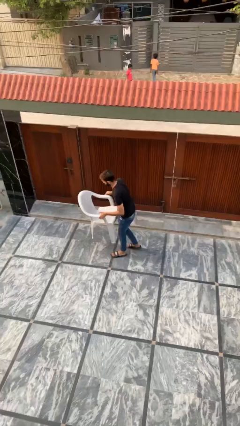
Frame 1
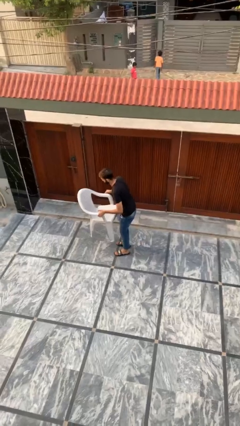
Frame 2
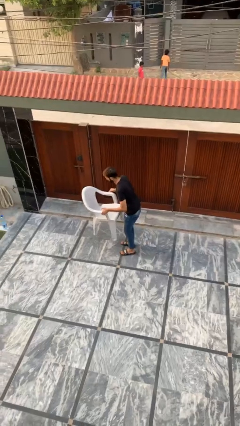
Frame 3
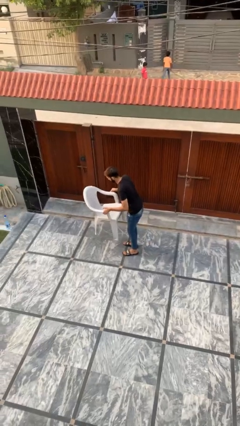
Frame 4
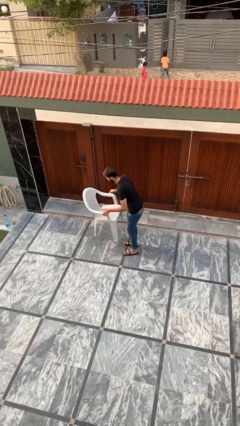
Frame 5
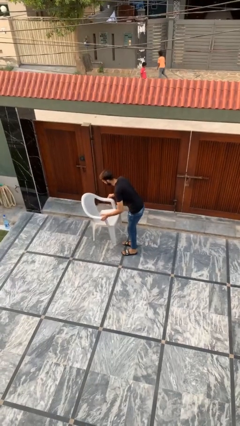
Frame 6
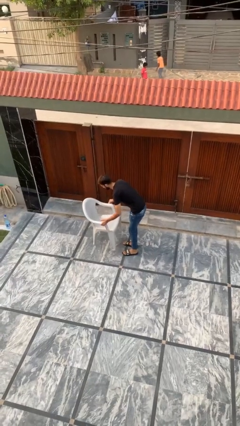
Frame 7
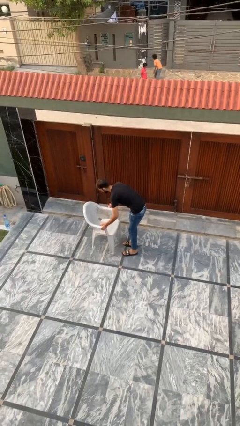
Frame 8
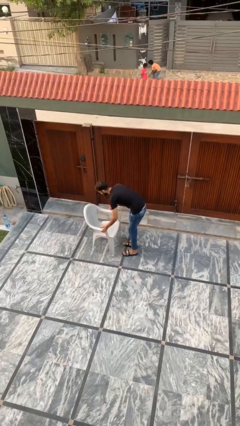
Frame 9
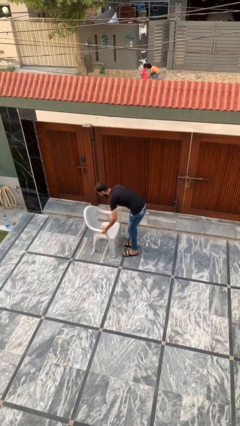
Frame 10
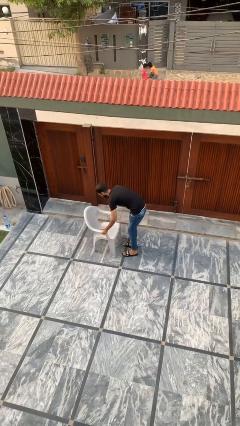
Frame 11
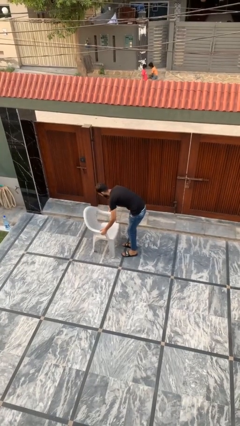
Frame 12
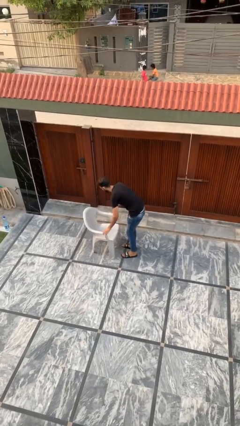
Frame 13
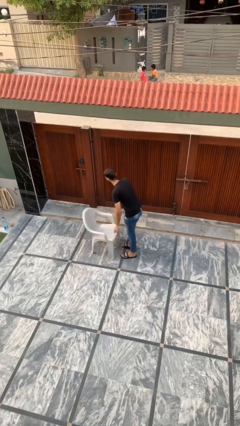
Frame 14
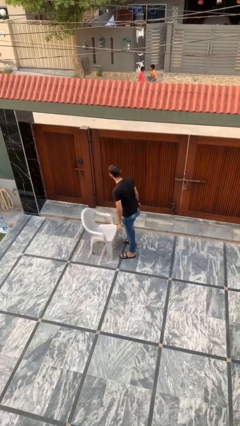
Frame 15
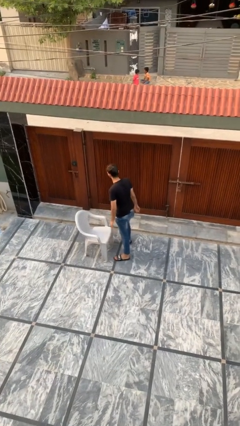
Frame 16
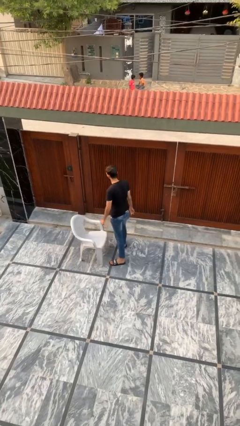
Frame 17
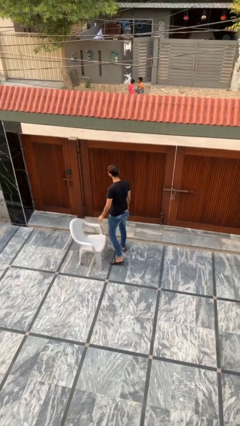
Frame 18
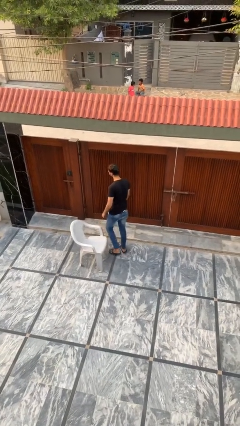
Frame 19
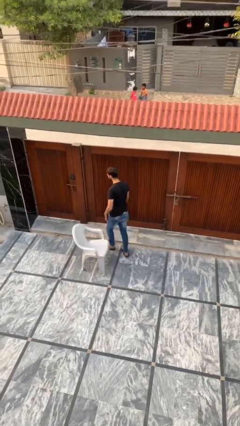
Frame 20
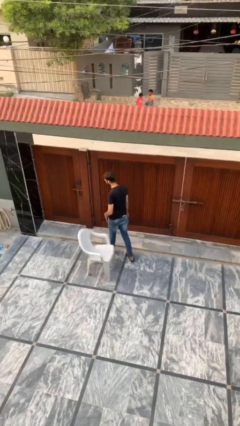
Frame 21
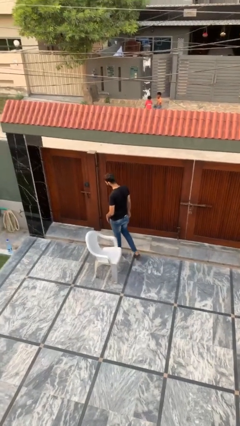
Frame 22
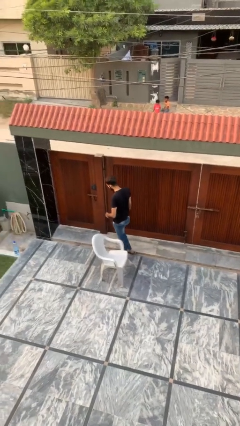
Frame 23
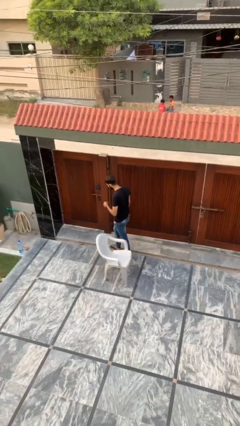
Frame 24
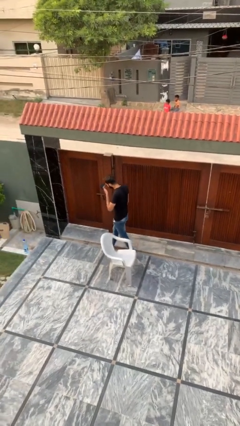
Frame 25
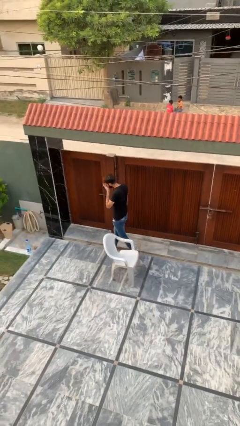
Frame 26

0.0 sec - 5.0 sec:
person puts down object on floor

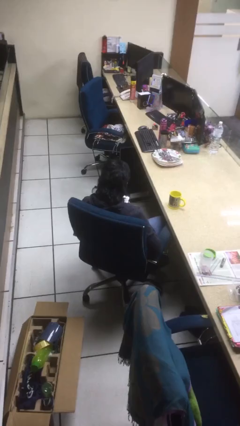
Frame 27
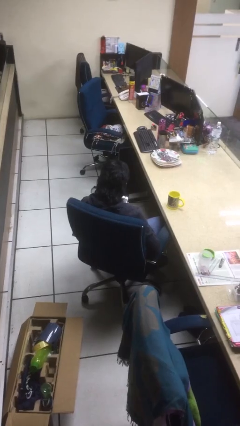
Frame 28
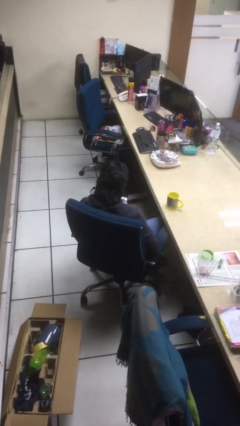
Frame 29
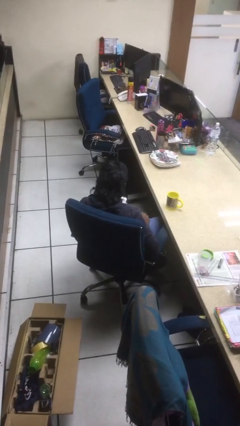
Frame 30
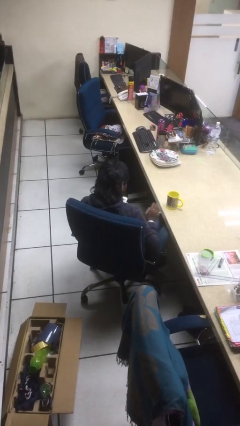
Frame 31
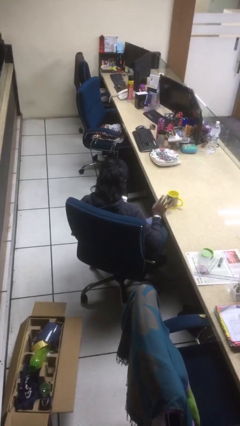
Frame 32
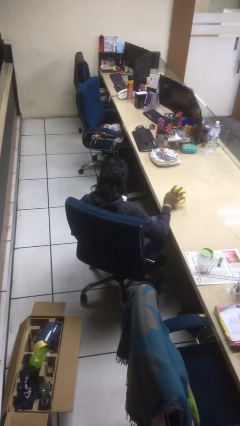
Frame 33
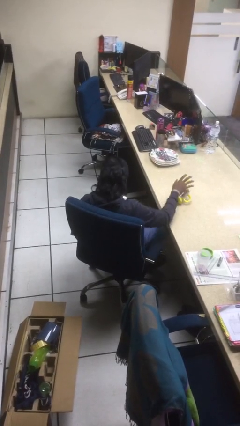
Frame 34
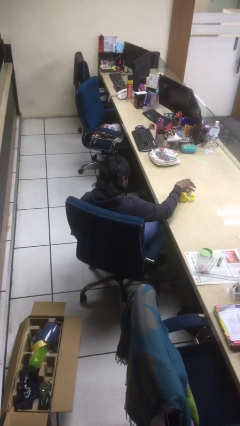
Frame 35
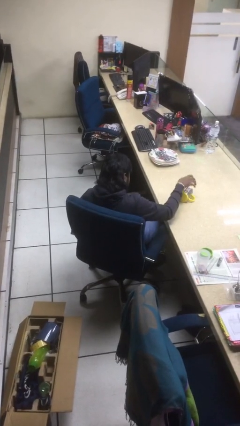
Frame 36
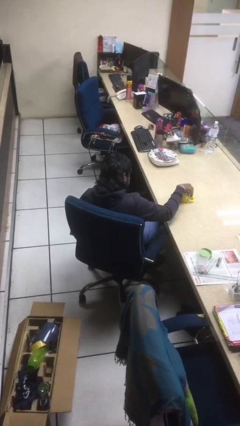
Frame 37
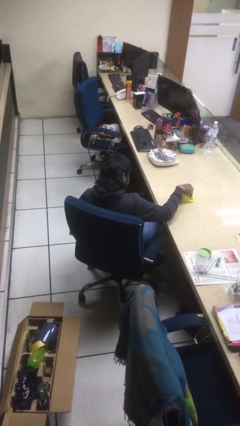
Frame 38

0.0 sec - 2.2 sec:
person knocks over glass

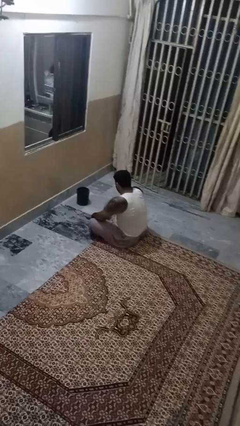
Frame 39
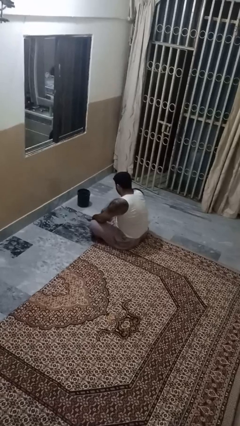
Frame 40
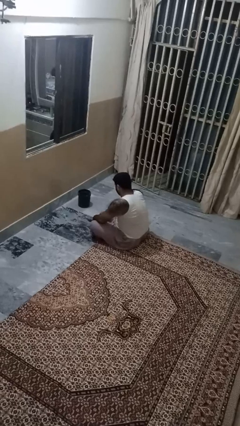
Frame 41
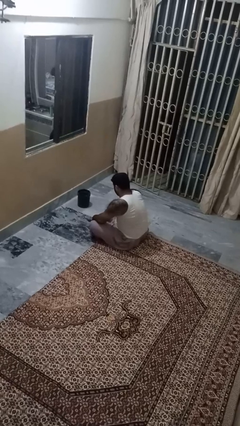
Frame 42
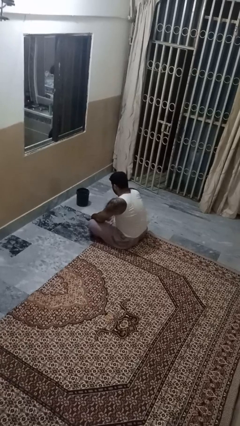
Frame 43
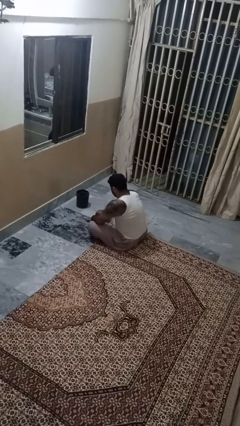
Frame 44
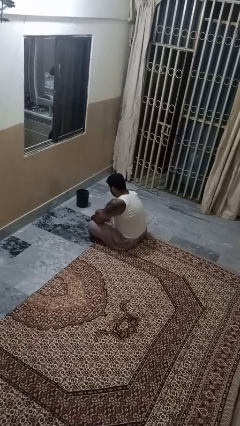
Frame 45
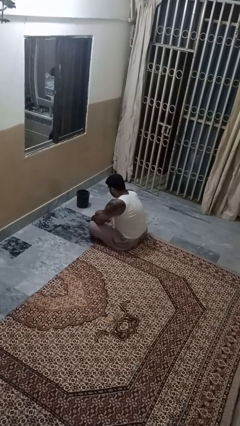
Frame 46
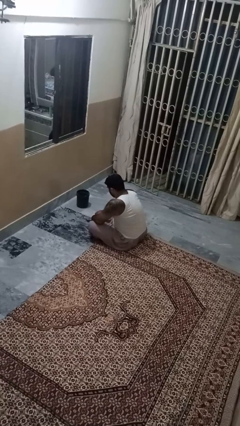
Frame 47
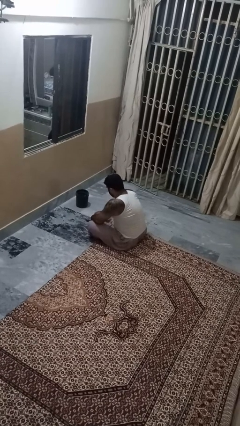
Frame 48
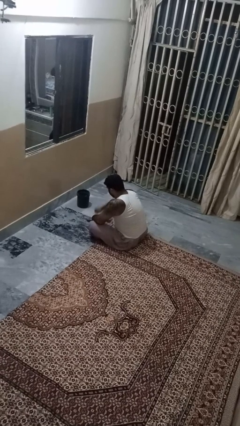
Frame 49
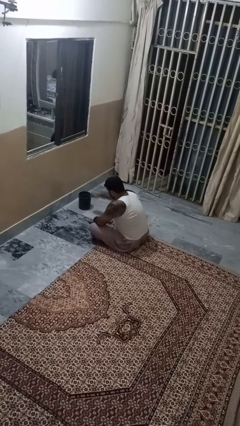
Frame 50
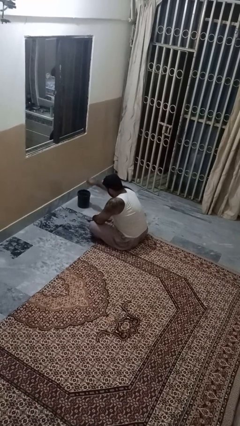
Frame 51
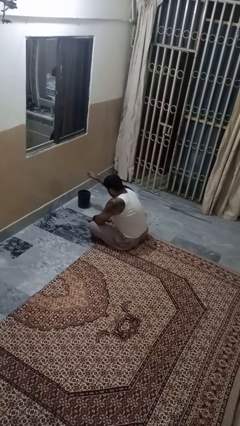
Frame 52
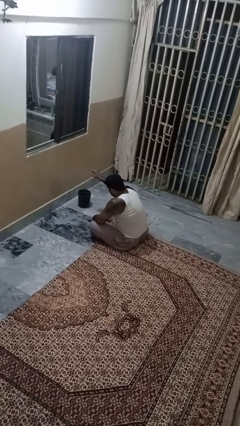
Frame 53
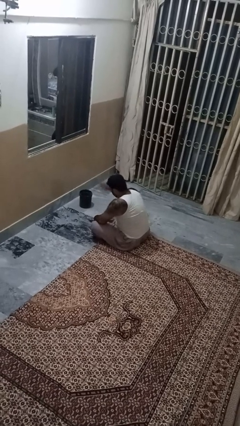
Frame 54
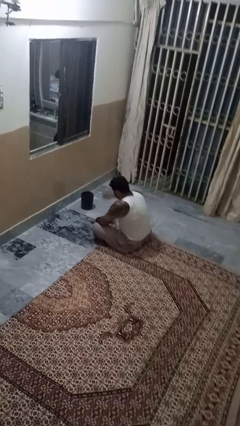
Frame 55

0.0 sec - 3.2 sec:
person discards trash

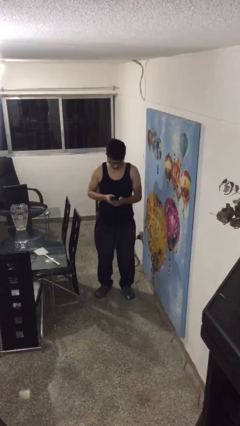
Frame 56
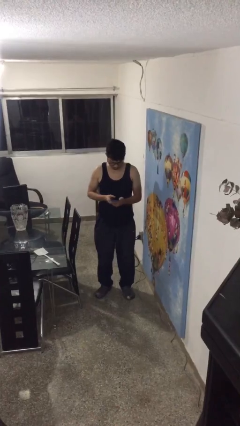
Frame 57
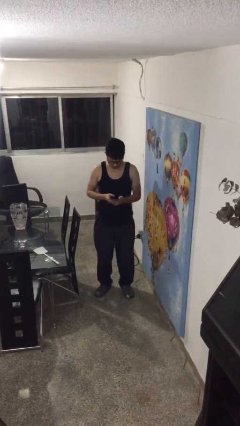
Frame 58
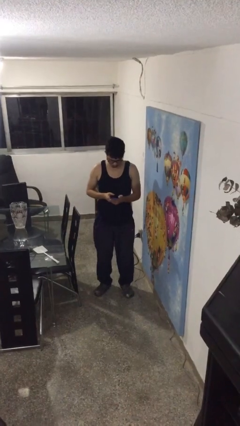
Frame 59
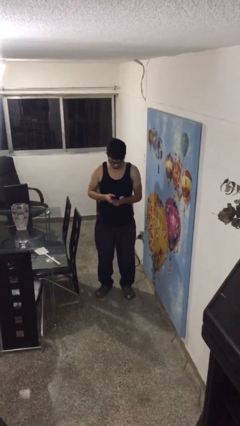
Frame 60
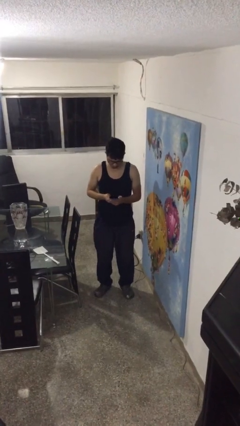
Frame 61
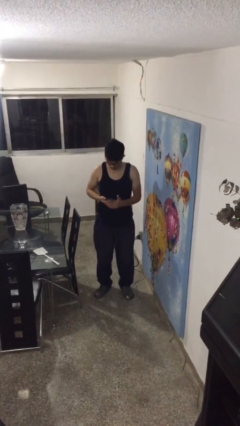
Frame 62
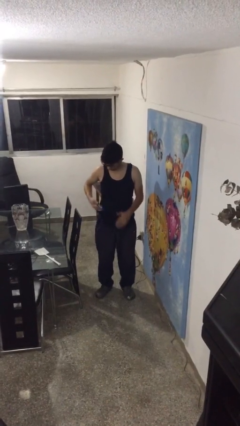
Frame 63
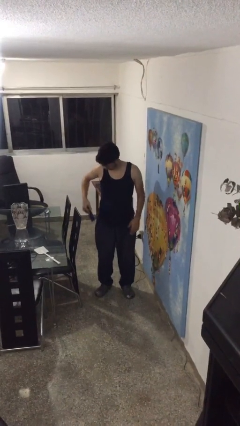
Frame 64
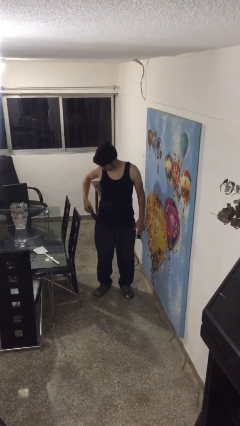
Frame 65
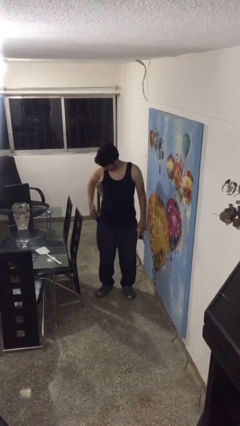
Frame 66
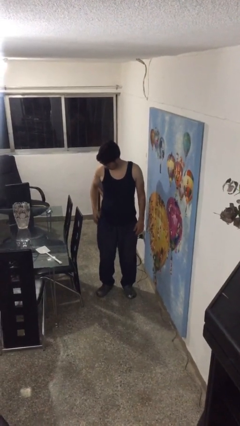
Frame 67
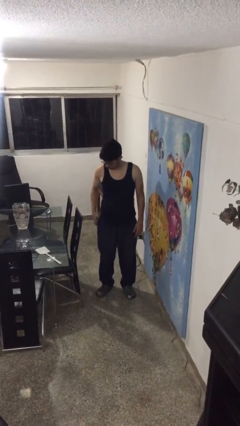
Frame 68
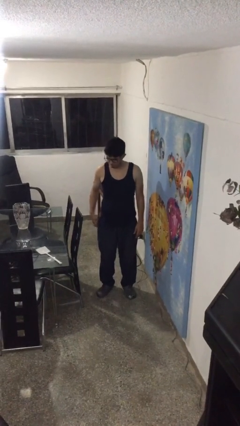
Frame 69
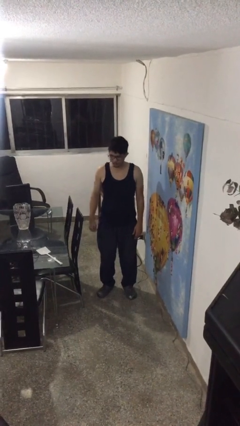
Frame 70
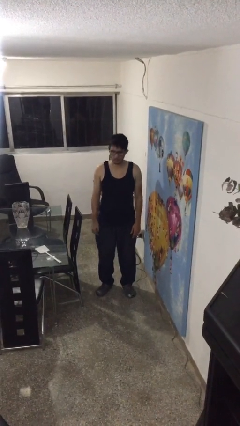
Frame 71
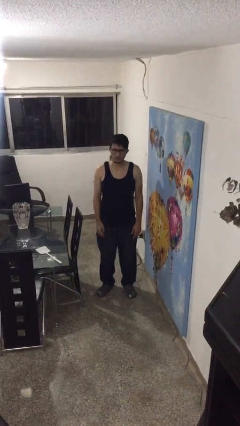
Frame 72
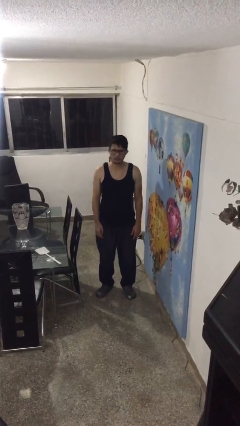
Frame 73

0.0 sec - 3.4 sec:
person puts phone into pocket

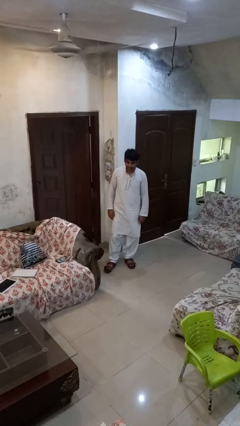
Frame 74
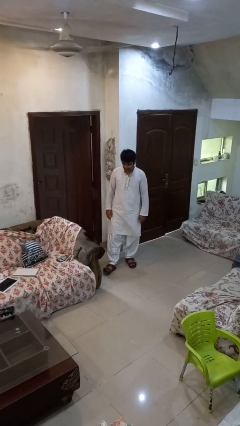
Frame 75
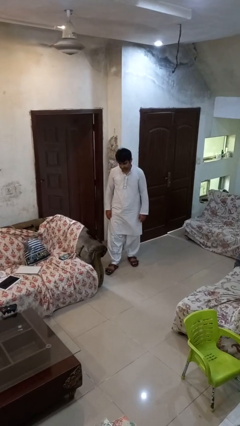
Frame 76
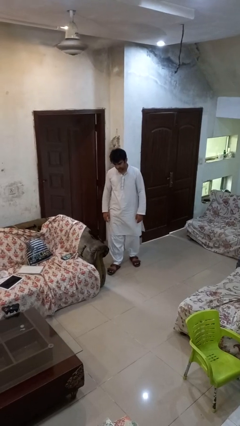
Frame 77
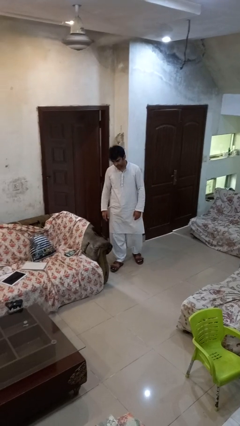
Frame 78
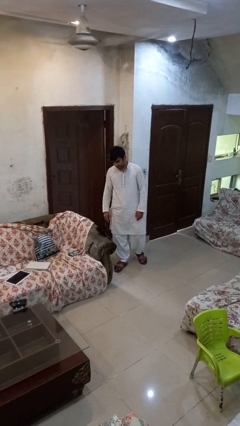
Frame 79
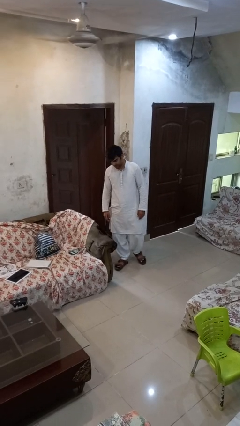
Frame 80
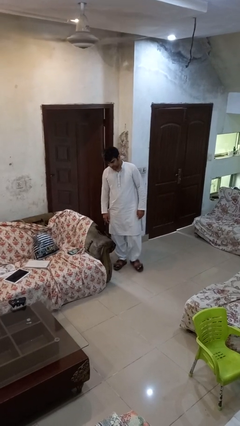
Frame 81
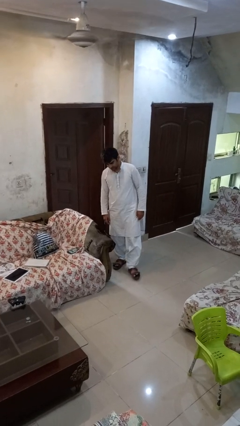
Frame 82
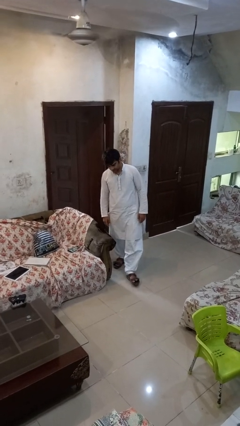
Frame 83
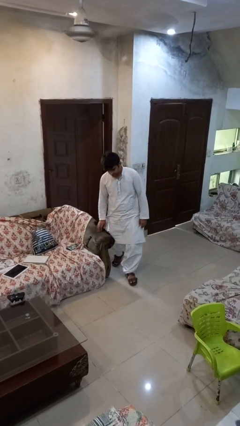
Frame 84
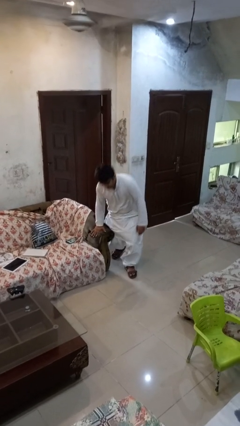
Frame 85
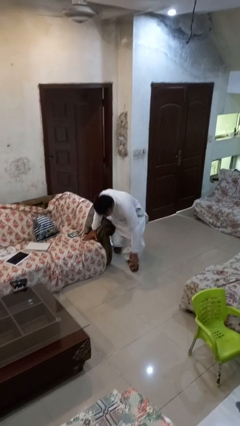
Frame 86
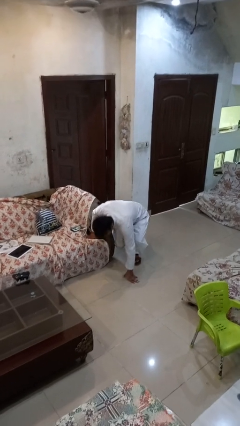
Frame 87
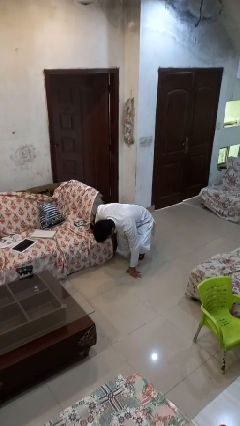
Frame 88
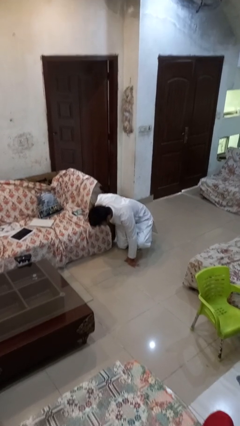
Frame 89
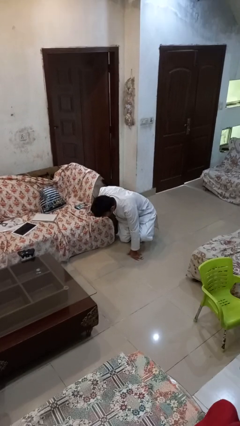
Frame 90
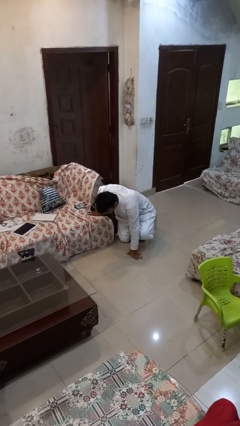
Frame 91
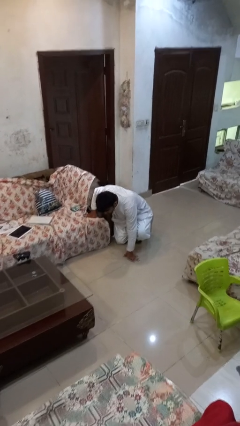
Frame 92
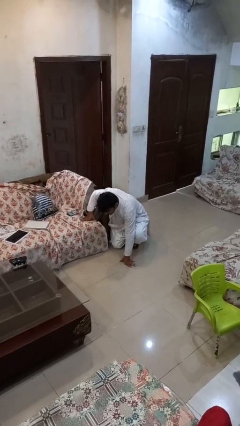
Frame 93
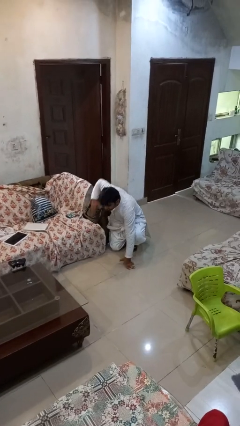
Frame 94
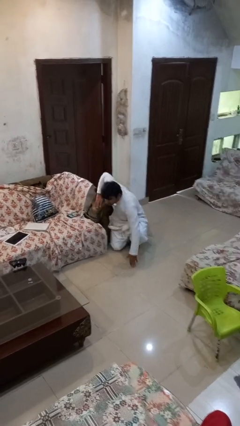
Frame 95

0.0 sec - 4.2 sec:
person trips on object on floor
